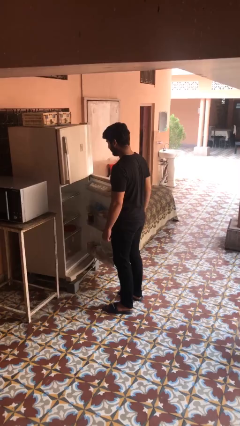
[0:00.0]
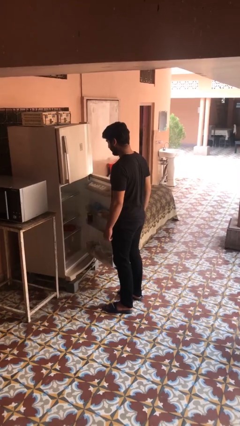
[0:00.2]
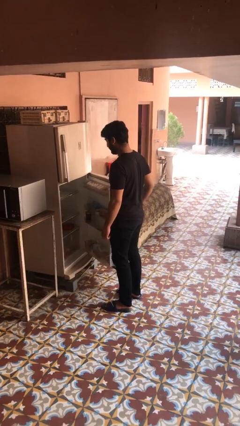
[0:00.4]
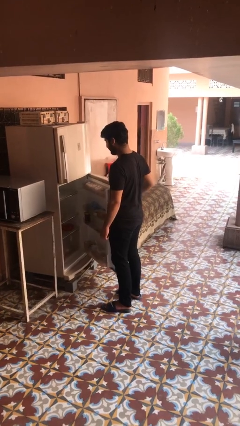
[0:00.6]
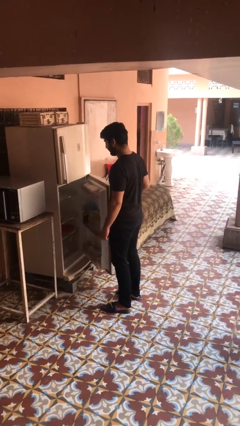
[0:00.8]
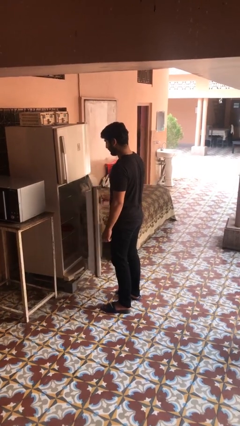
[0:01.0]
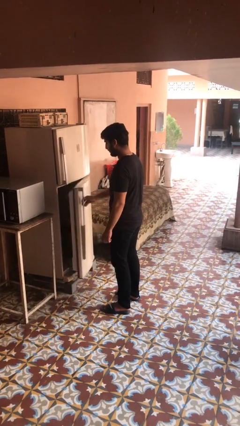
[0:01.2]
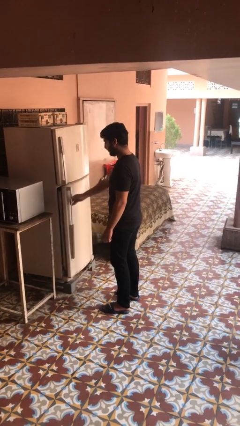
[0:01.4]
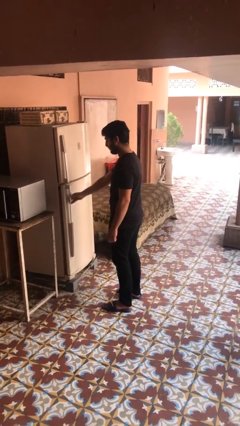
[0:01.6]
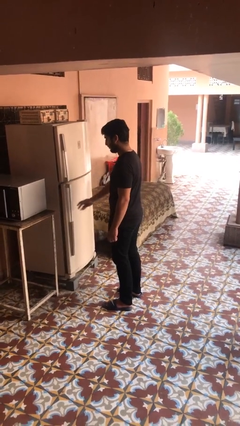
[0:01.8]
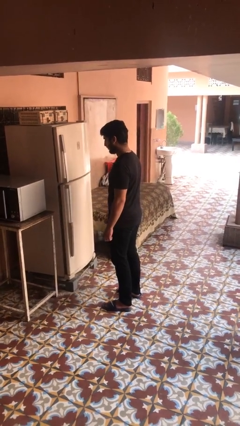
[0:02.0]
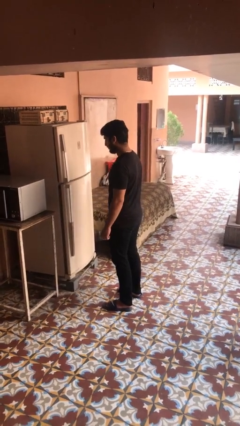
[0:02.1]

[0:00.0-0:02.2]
person closes refrigerator

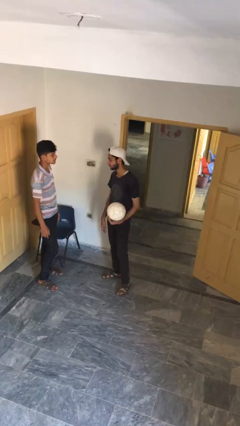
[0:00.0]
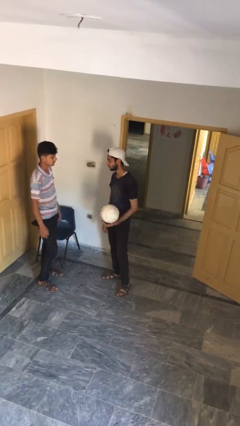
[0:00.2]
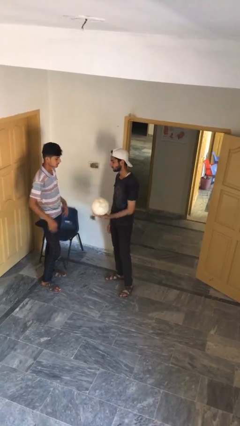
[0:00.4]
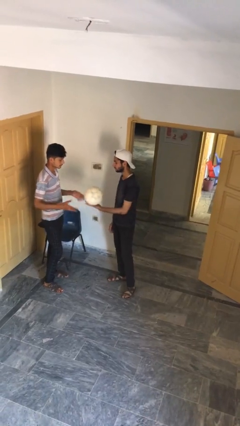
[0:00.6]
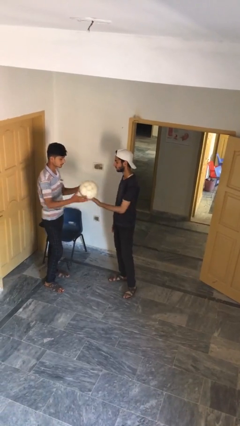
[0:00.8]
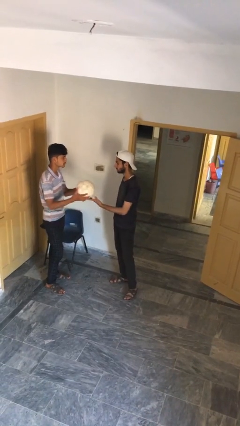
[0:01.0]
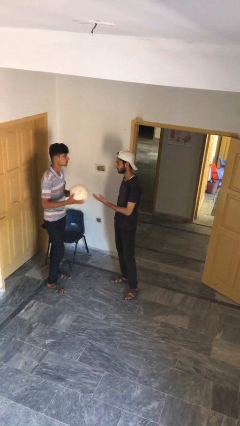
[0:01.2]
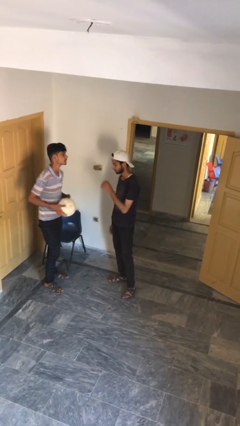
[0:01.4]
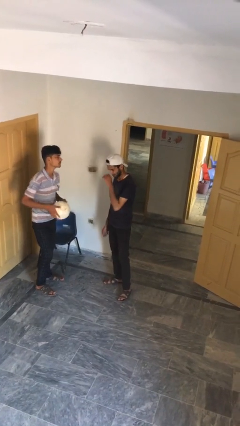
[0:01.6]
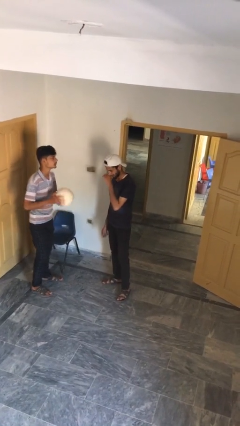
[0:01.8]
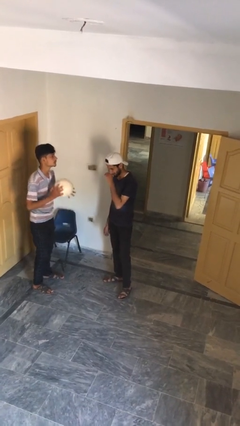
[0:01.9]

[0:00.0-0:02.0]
person transfers object to person

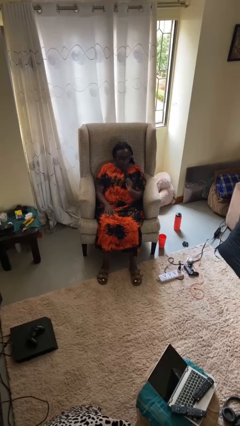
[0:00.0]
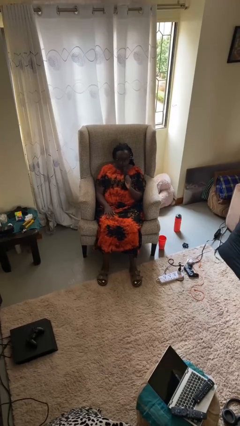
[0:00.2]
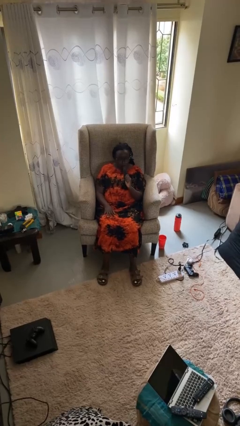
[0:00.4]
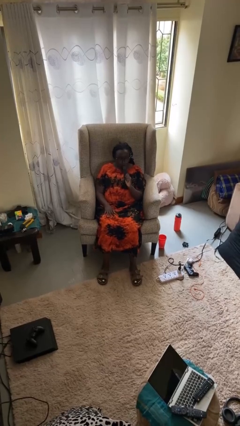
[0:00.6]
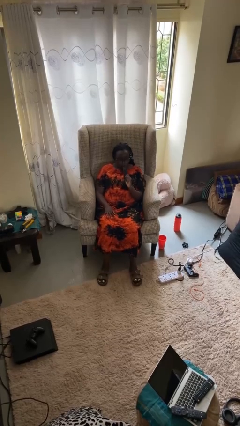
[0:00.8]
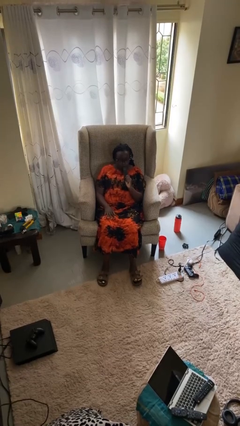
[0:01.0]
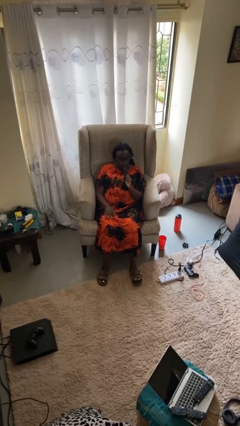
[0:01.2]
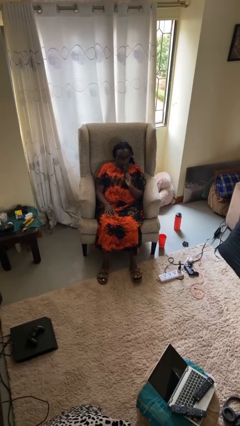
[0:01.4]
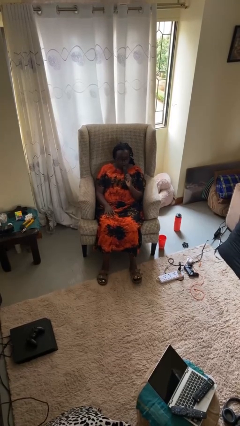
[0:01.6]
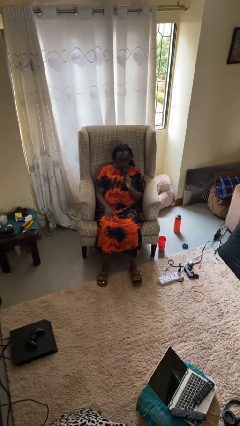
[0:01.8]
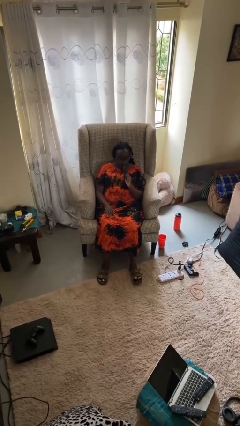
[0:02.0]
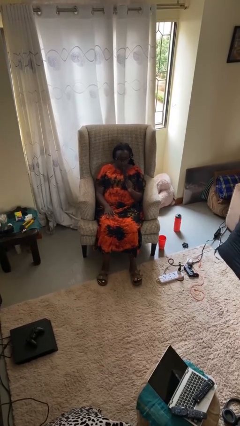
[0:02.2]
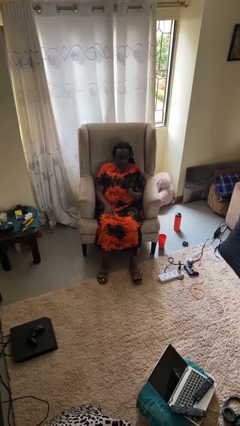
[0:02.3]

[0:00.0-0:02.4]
person vapes

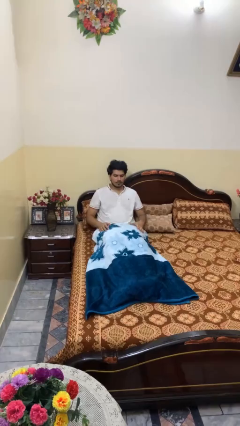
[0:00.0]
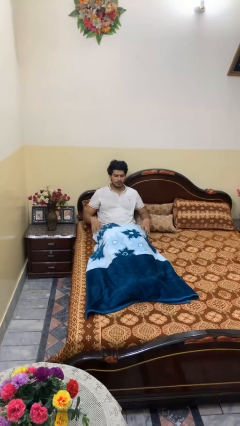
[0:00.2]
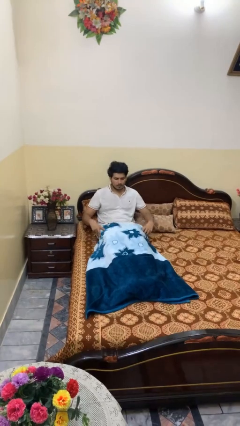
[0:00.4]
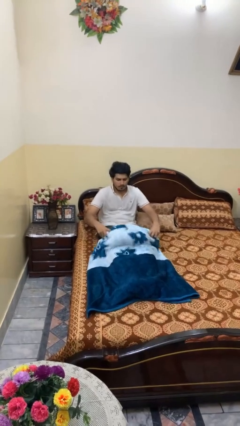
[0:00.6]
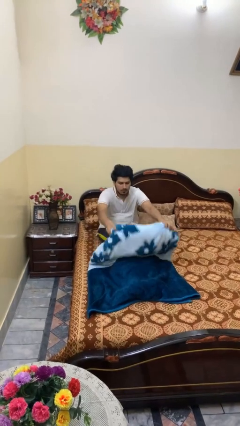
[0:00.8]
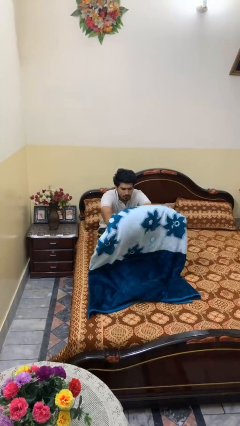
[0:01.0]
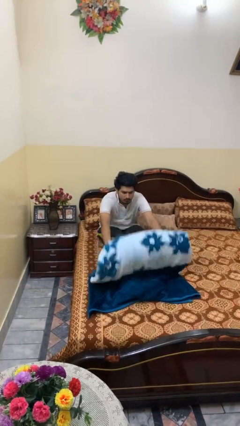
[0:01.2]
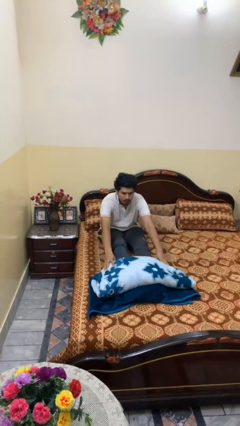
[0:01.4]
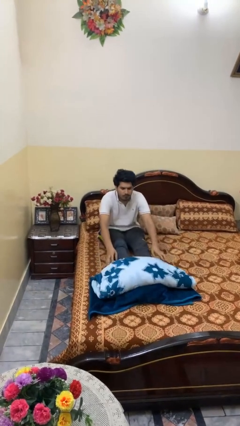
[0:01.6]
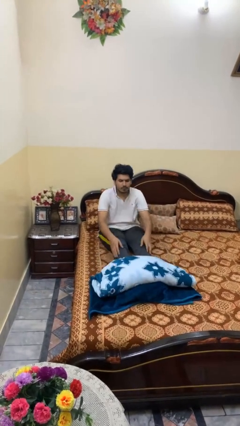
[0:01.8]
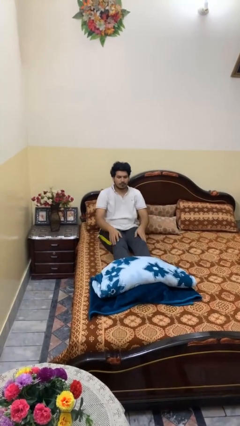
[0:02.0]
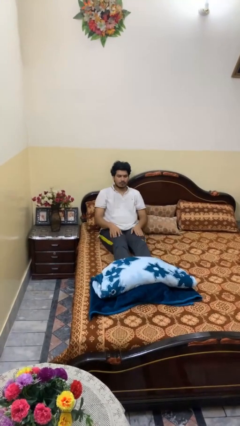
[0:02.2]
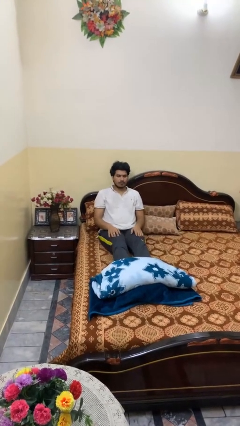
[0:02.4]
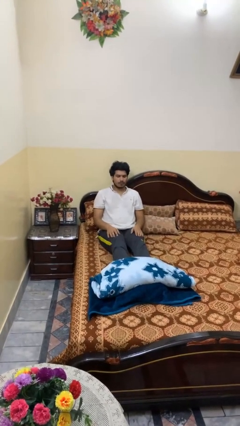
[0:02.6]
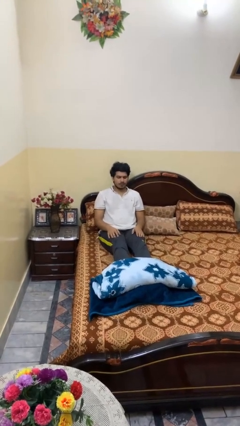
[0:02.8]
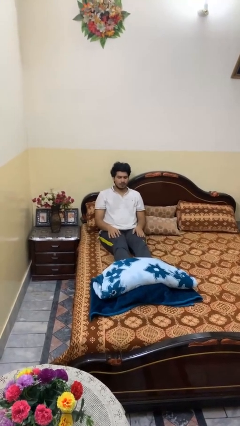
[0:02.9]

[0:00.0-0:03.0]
person uncovers with blanket

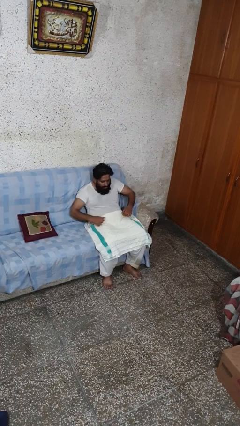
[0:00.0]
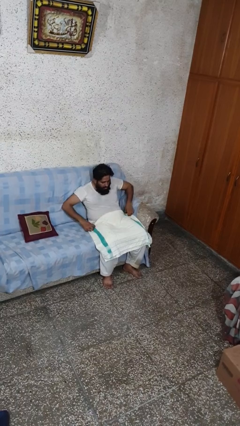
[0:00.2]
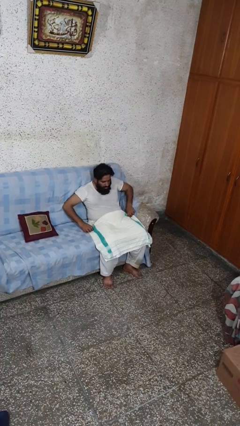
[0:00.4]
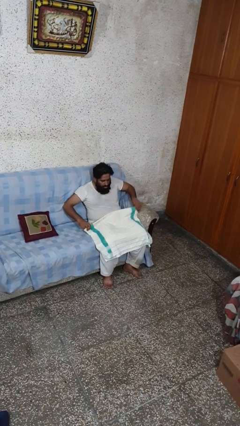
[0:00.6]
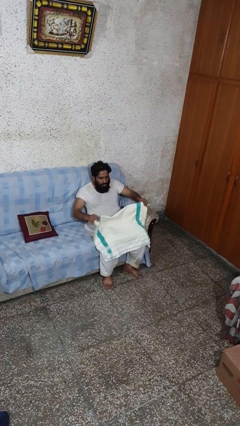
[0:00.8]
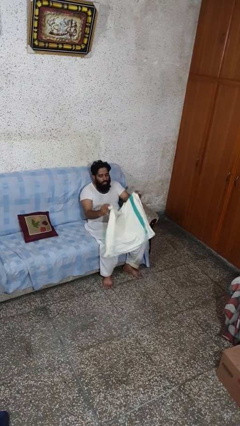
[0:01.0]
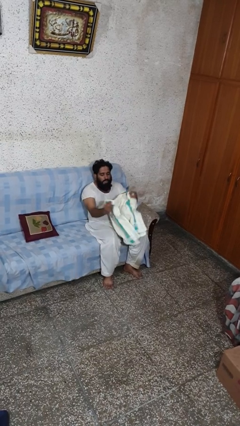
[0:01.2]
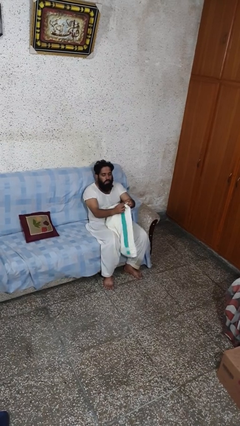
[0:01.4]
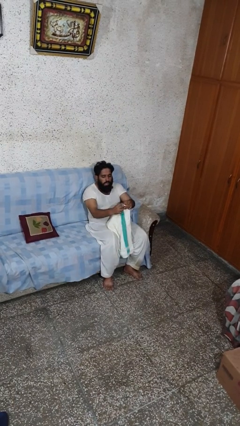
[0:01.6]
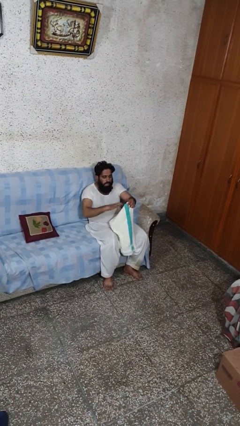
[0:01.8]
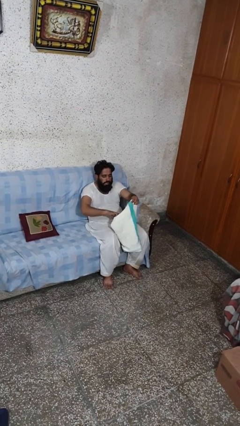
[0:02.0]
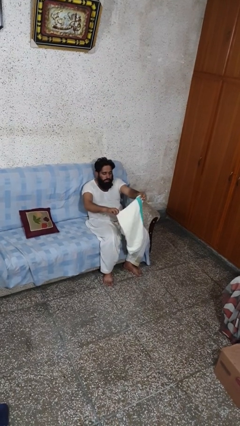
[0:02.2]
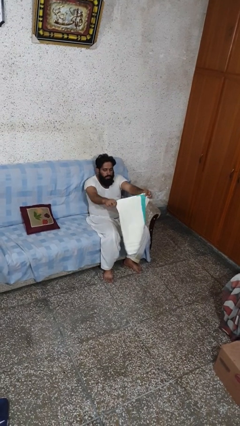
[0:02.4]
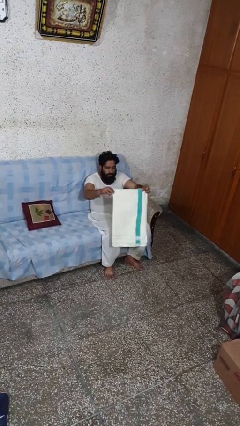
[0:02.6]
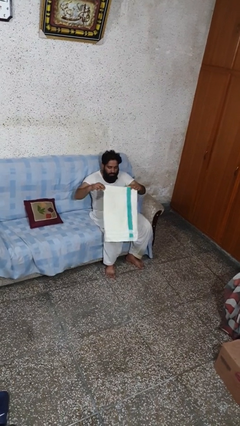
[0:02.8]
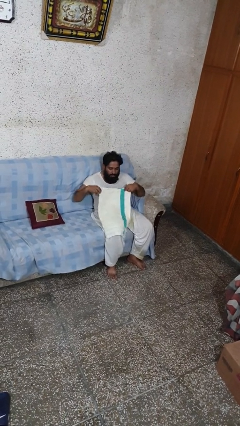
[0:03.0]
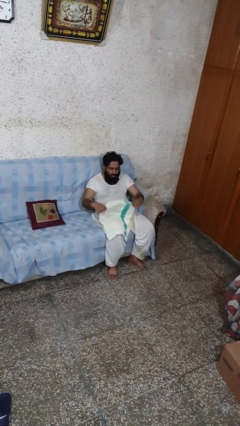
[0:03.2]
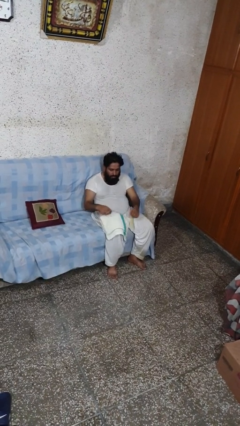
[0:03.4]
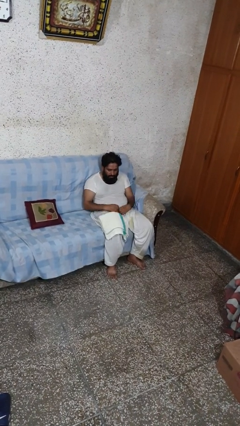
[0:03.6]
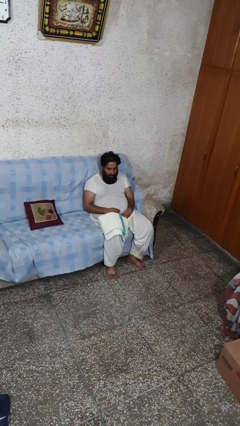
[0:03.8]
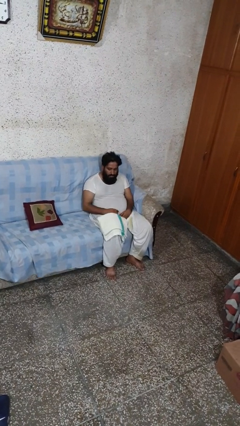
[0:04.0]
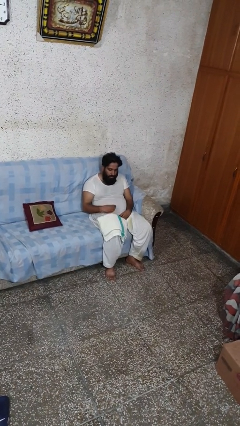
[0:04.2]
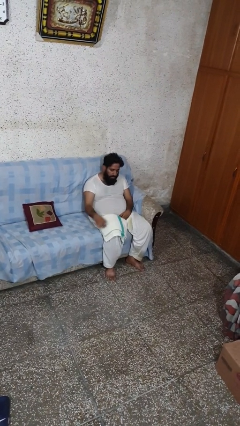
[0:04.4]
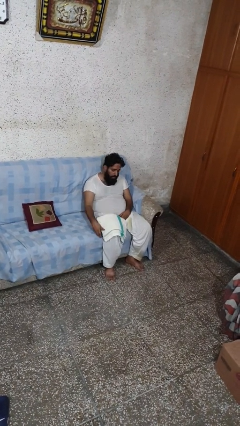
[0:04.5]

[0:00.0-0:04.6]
person folds towel

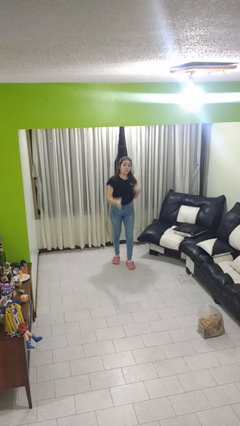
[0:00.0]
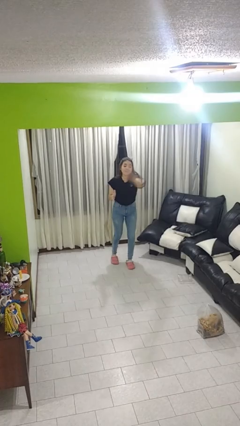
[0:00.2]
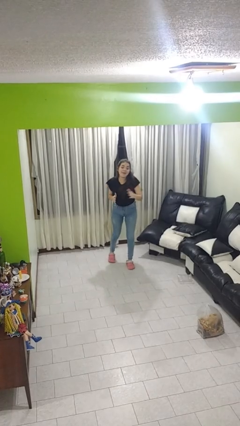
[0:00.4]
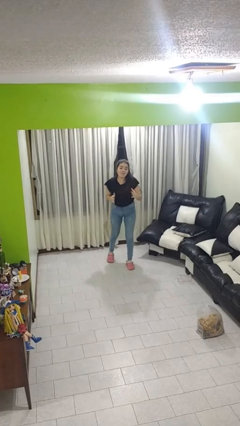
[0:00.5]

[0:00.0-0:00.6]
person karate chop

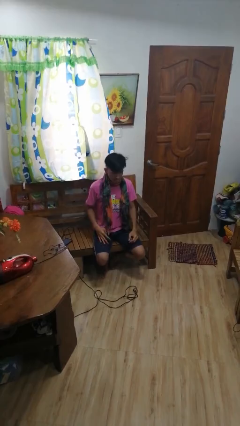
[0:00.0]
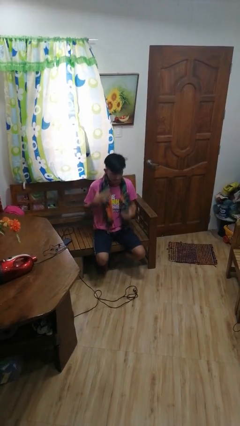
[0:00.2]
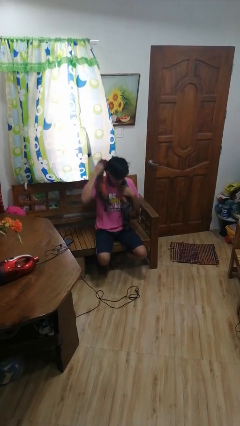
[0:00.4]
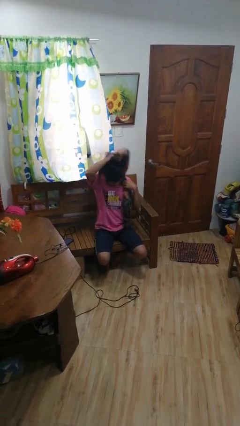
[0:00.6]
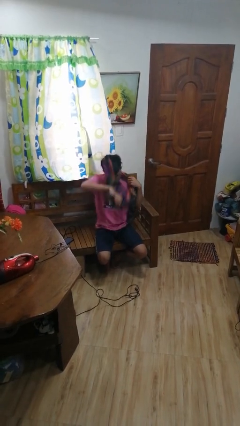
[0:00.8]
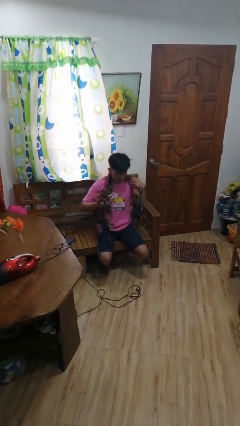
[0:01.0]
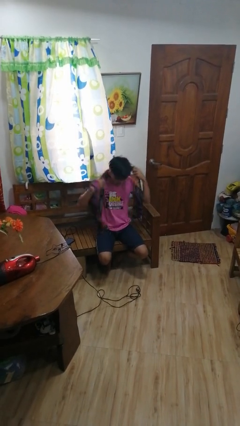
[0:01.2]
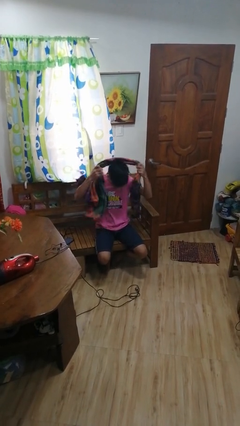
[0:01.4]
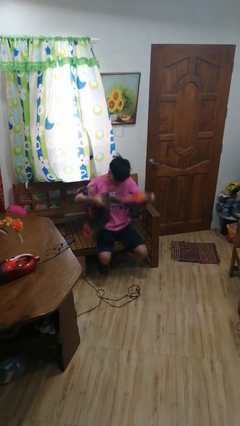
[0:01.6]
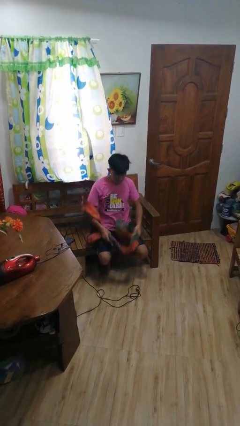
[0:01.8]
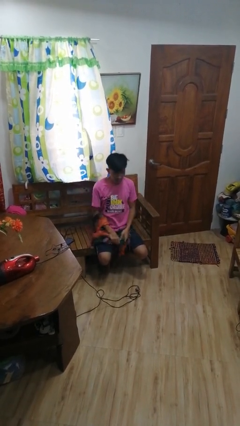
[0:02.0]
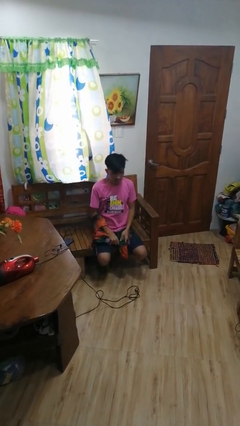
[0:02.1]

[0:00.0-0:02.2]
person takes off scarf
